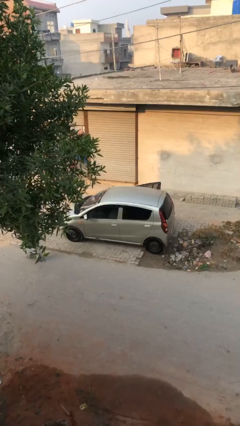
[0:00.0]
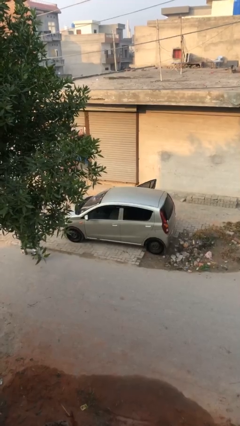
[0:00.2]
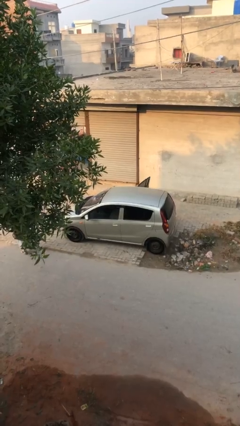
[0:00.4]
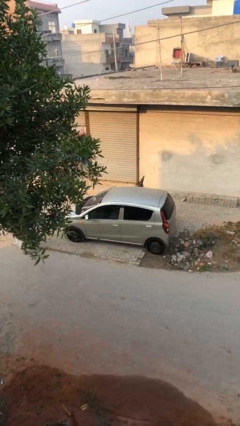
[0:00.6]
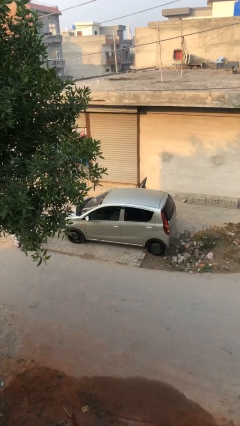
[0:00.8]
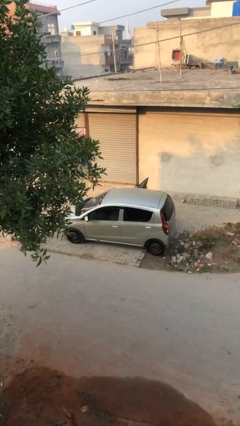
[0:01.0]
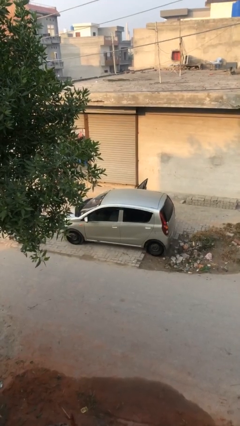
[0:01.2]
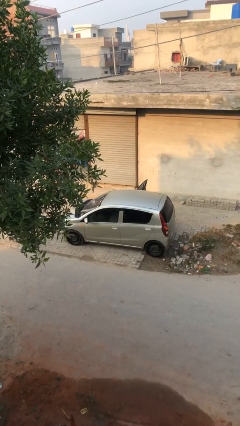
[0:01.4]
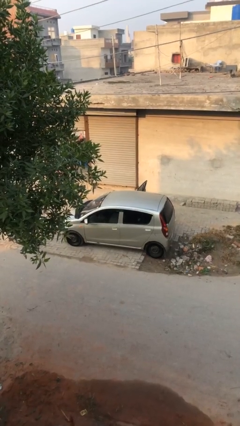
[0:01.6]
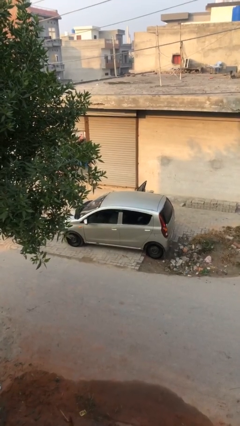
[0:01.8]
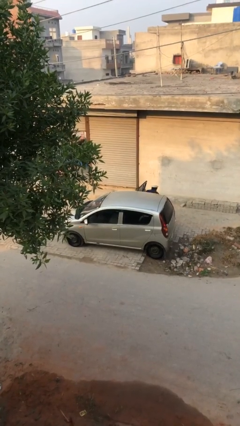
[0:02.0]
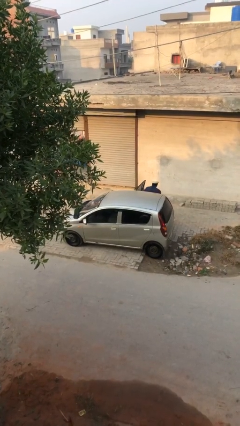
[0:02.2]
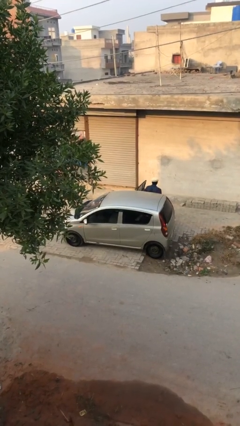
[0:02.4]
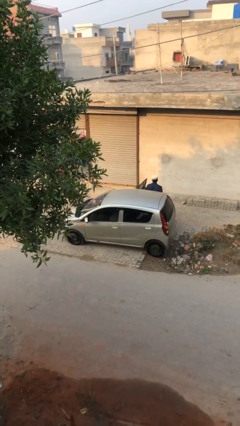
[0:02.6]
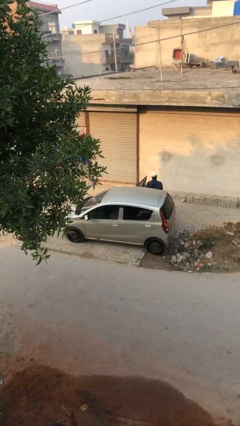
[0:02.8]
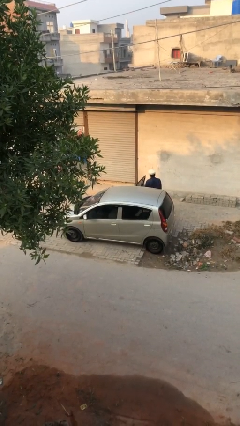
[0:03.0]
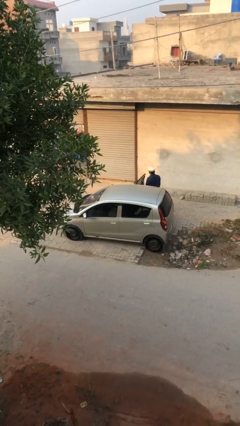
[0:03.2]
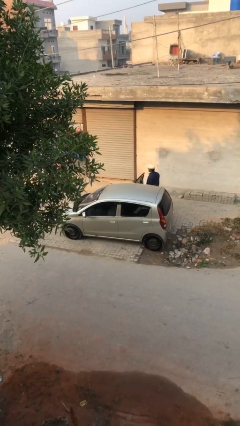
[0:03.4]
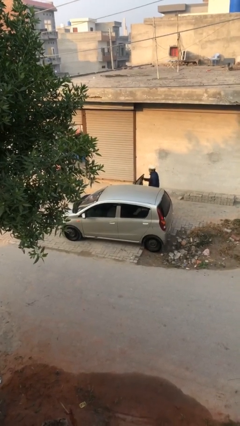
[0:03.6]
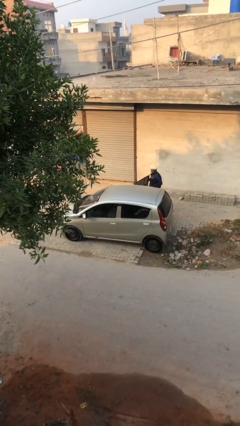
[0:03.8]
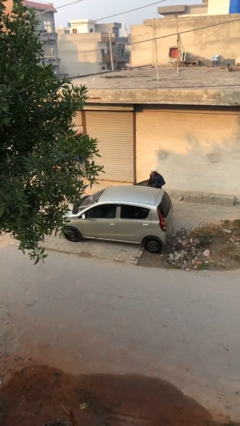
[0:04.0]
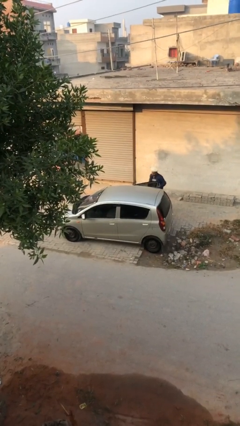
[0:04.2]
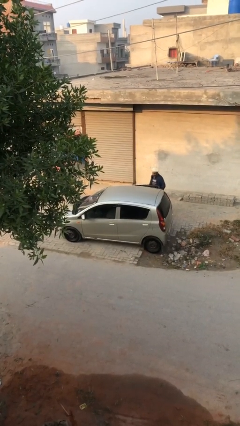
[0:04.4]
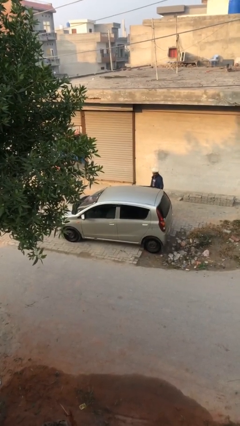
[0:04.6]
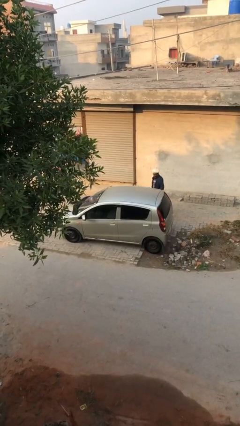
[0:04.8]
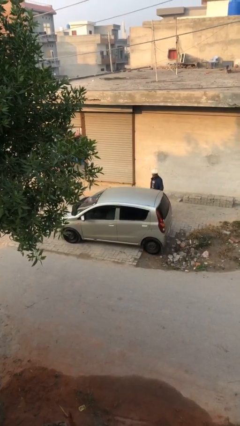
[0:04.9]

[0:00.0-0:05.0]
car drops off person

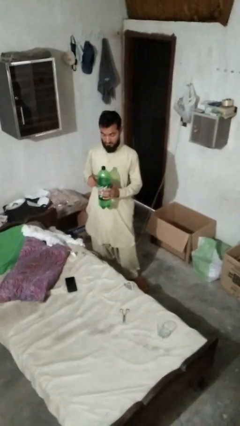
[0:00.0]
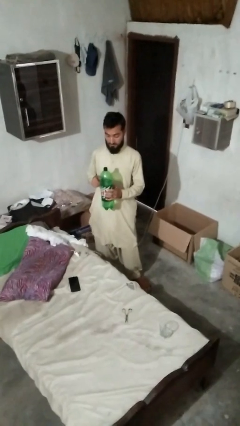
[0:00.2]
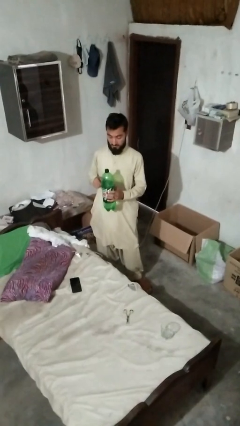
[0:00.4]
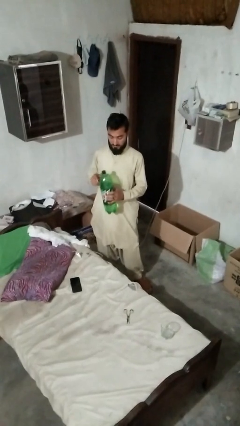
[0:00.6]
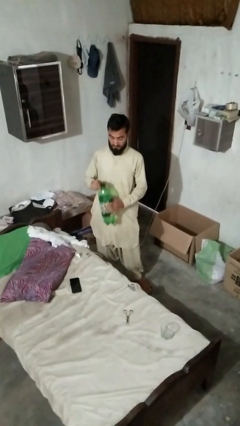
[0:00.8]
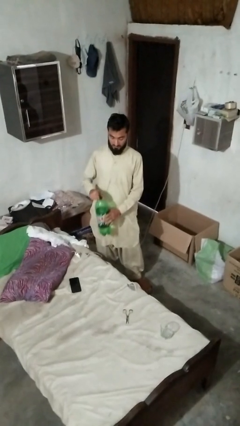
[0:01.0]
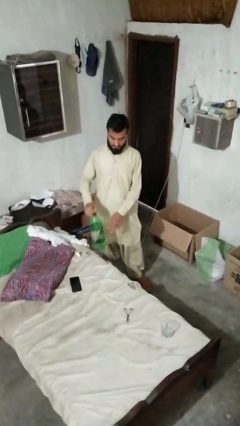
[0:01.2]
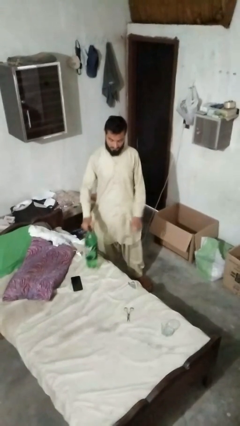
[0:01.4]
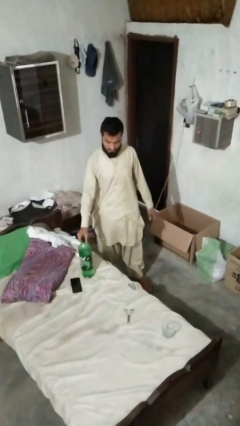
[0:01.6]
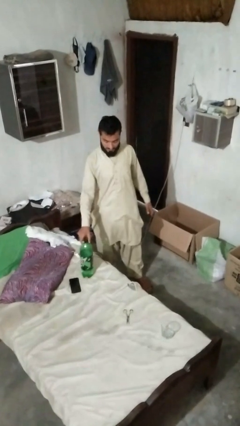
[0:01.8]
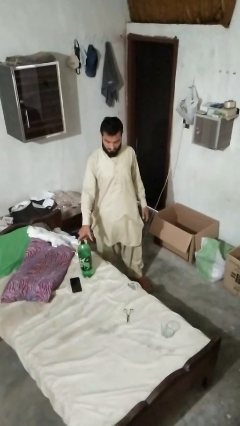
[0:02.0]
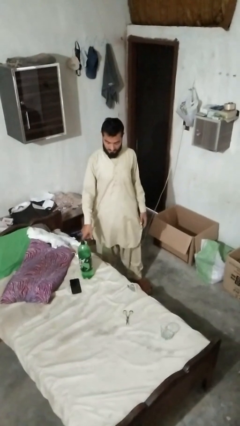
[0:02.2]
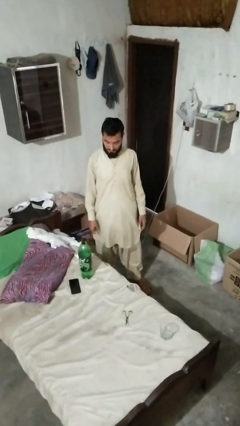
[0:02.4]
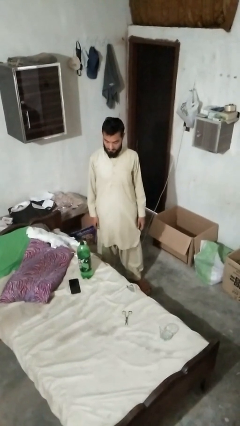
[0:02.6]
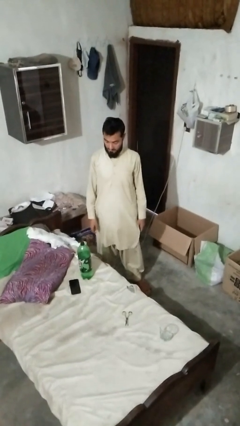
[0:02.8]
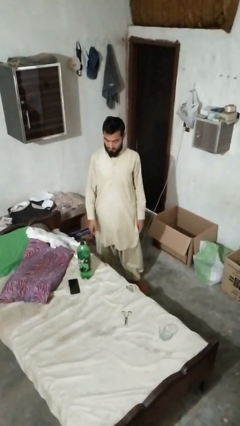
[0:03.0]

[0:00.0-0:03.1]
person puts down object on bed

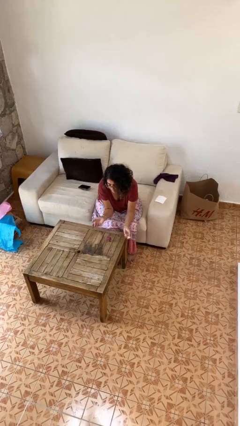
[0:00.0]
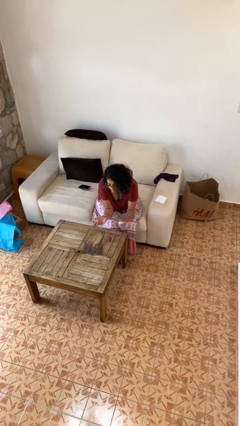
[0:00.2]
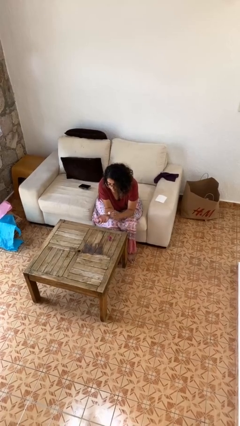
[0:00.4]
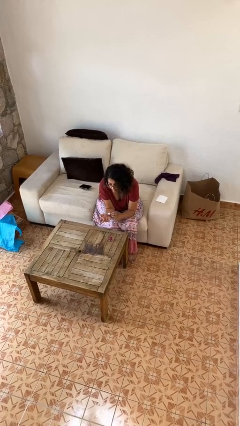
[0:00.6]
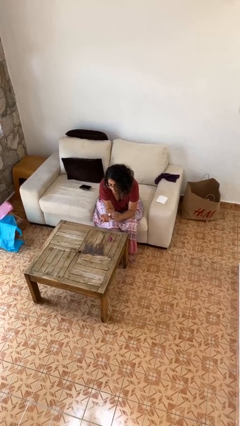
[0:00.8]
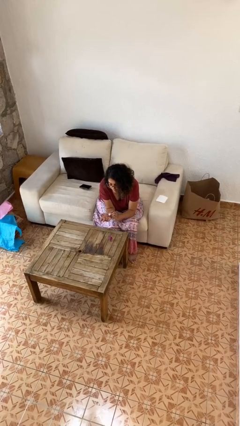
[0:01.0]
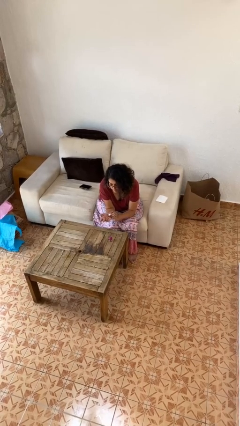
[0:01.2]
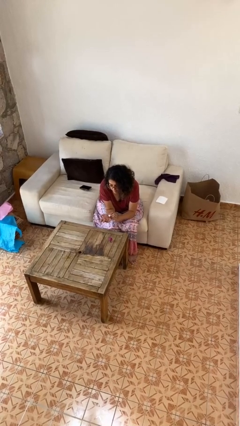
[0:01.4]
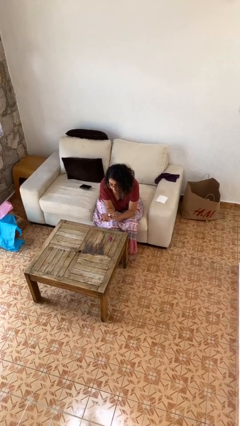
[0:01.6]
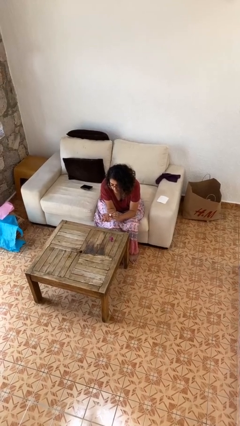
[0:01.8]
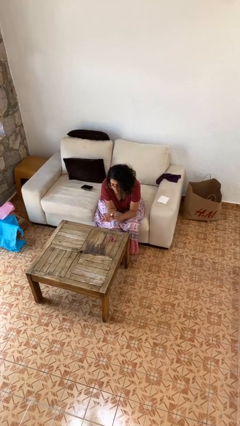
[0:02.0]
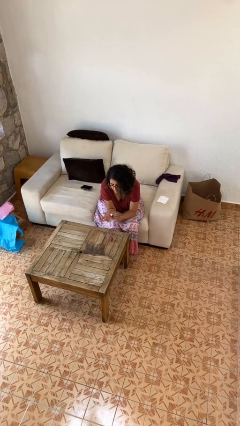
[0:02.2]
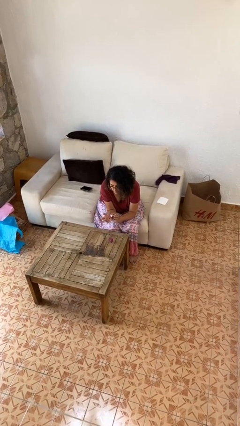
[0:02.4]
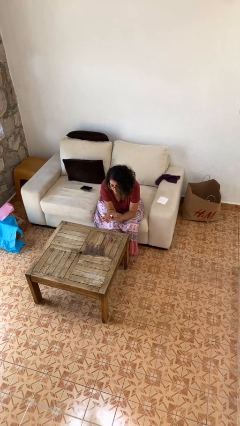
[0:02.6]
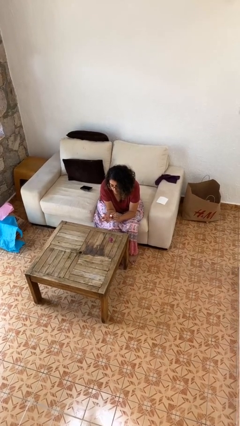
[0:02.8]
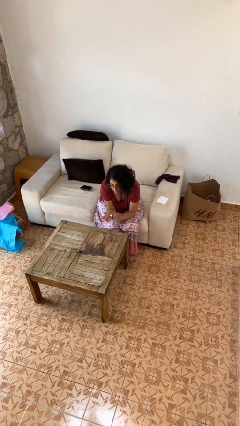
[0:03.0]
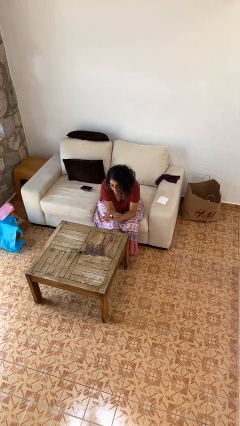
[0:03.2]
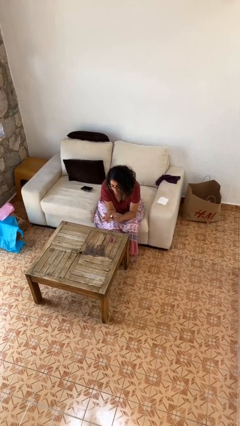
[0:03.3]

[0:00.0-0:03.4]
person paints fingernails

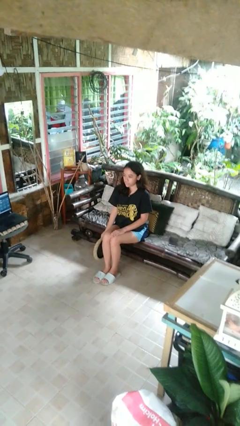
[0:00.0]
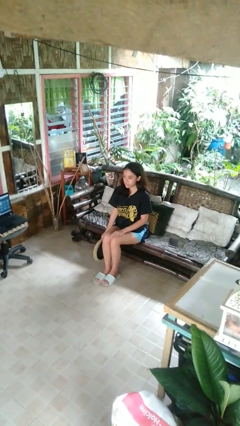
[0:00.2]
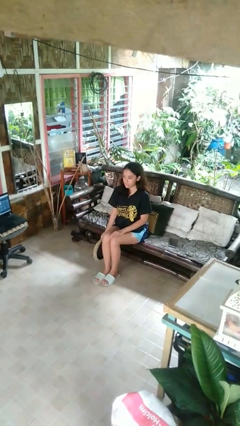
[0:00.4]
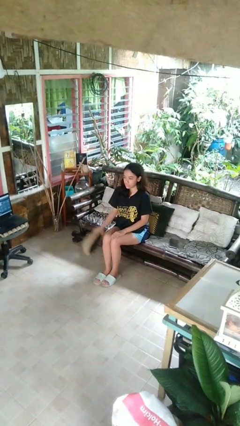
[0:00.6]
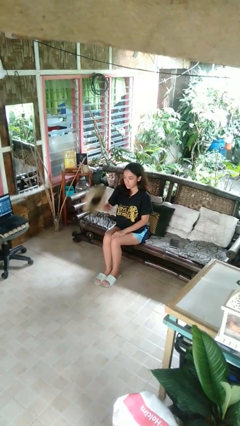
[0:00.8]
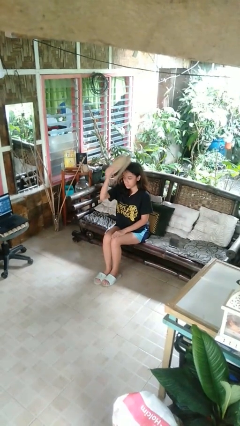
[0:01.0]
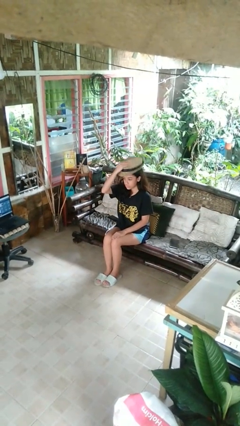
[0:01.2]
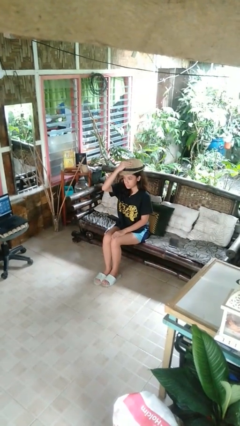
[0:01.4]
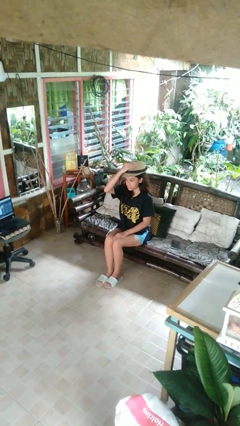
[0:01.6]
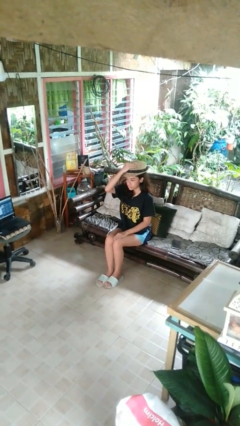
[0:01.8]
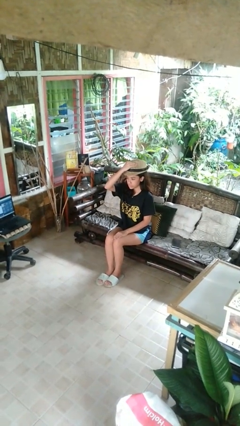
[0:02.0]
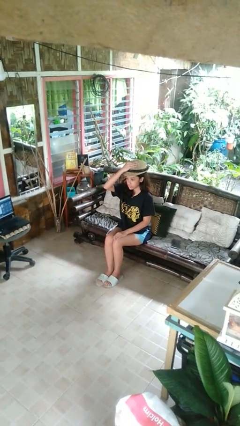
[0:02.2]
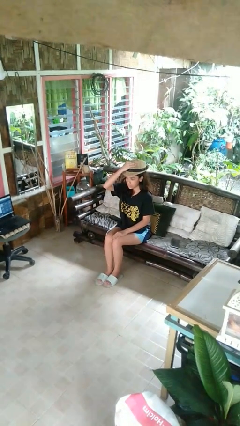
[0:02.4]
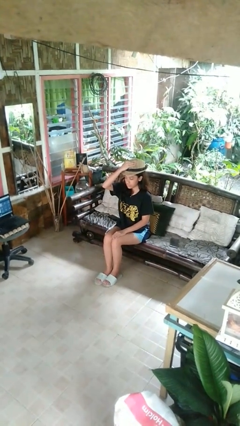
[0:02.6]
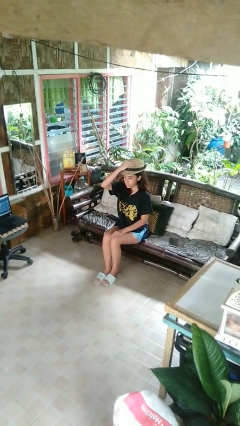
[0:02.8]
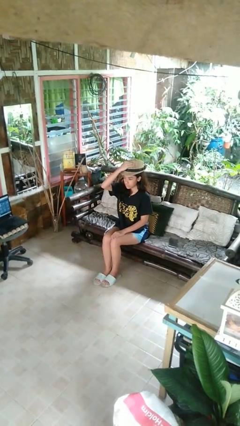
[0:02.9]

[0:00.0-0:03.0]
person puts on hat

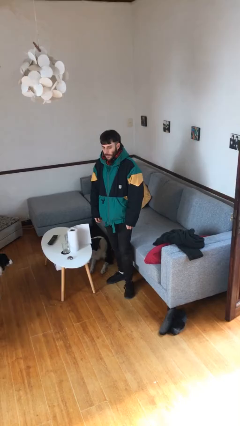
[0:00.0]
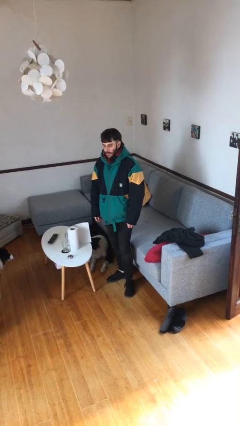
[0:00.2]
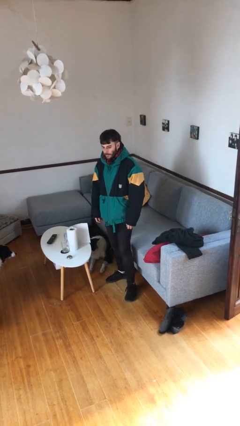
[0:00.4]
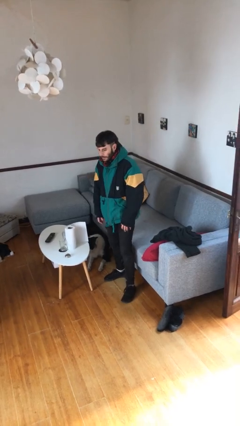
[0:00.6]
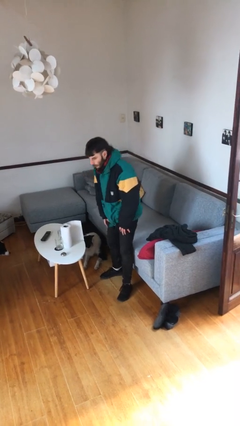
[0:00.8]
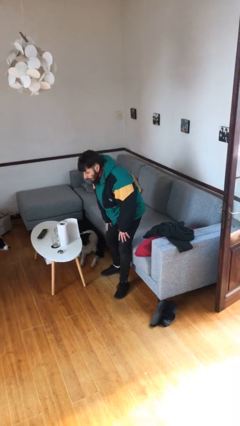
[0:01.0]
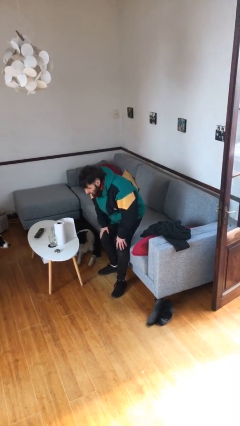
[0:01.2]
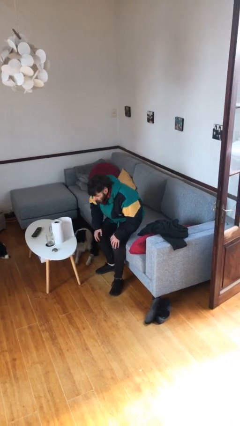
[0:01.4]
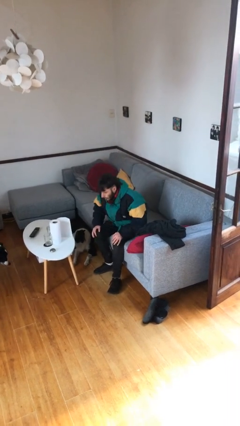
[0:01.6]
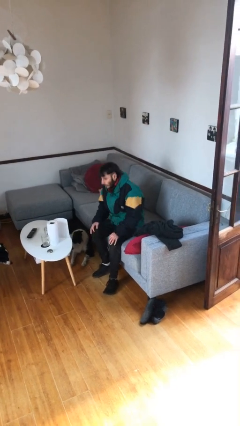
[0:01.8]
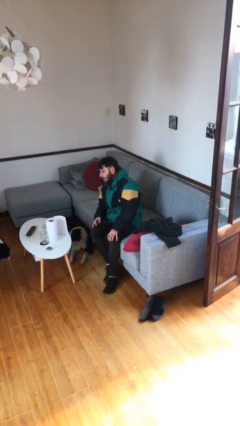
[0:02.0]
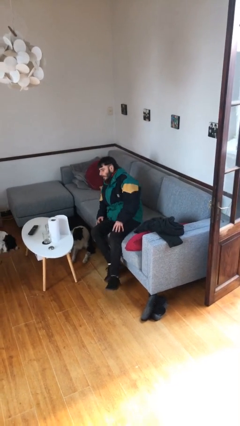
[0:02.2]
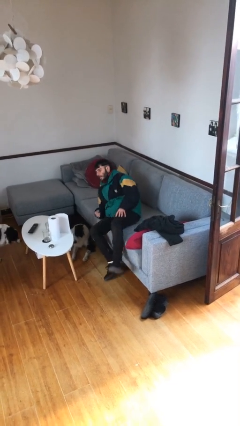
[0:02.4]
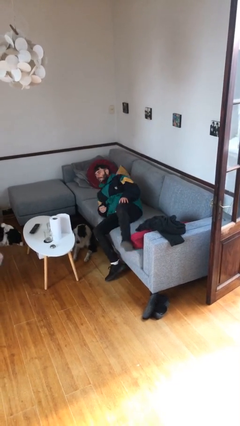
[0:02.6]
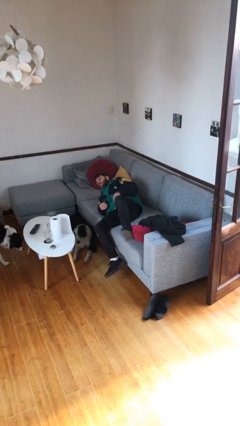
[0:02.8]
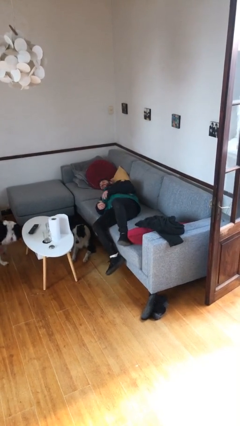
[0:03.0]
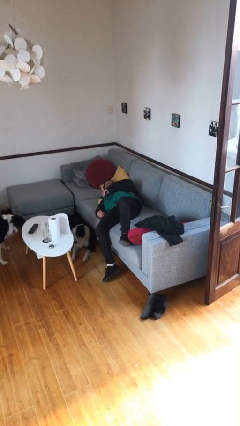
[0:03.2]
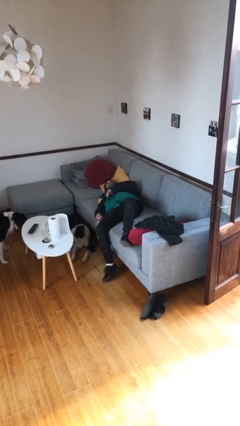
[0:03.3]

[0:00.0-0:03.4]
person lies down on couch
